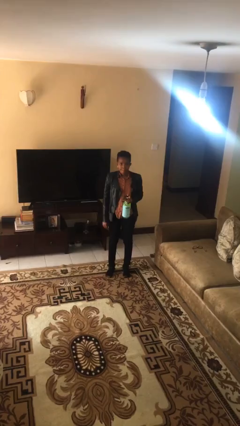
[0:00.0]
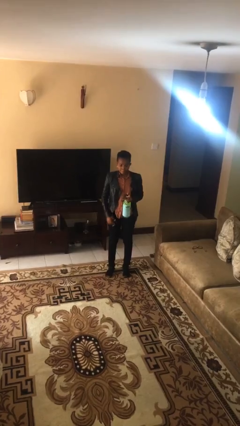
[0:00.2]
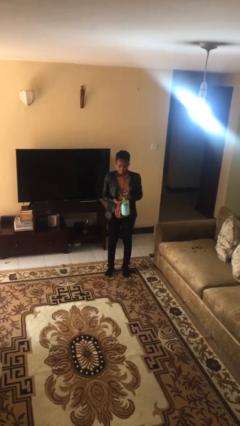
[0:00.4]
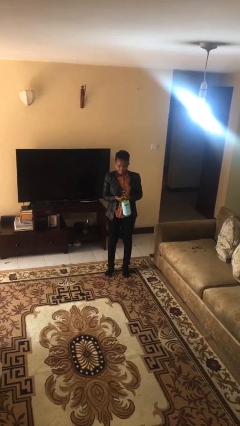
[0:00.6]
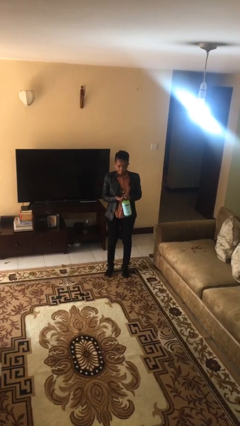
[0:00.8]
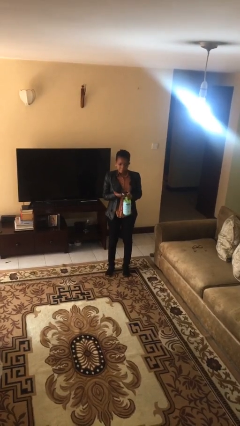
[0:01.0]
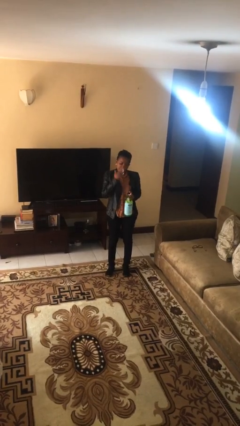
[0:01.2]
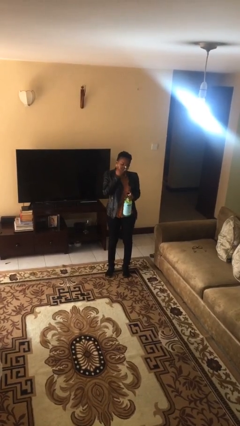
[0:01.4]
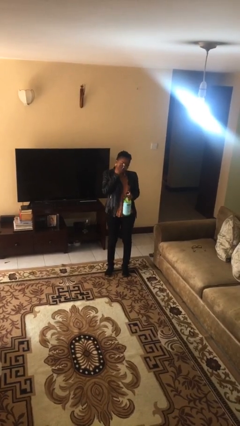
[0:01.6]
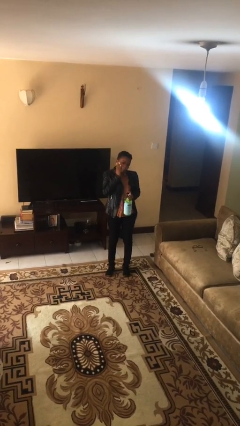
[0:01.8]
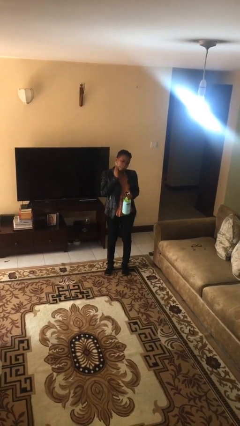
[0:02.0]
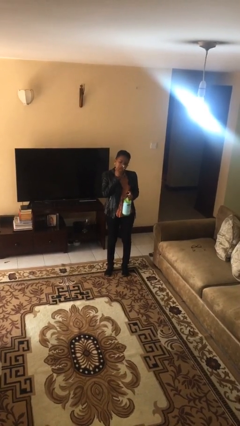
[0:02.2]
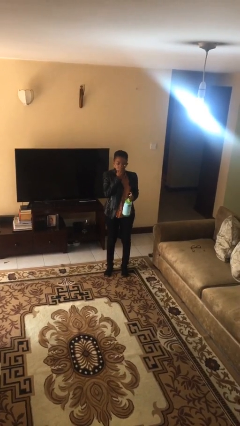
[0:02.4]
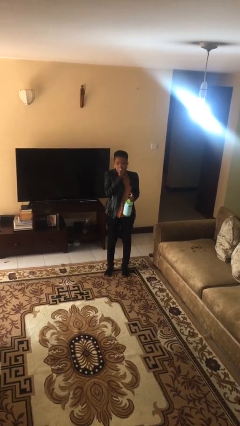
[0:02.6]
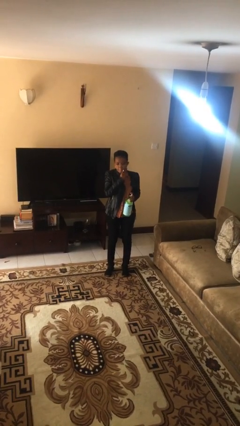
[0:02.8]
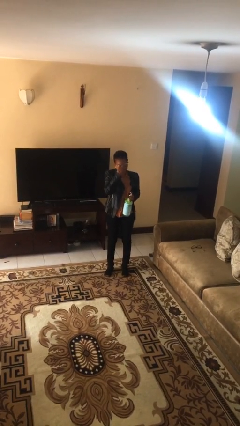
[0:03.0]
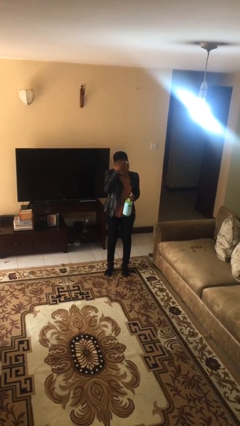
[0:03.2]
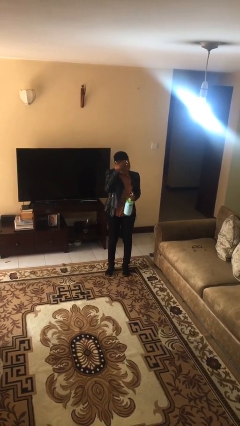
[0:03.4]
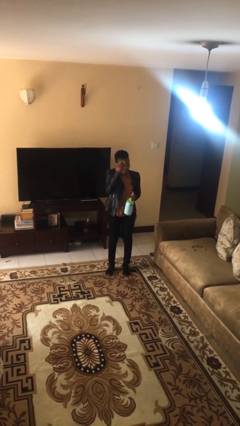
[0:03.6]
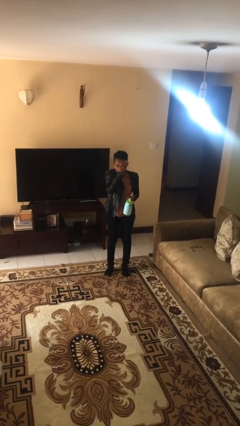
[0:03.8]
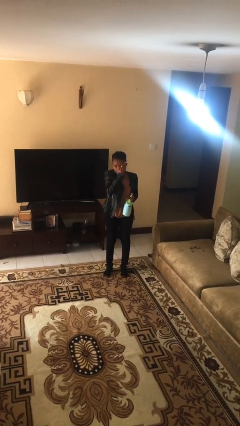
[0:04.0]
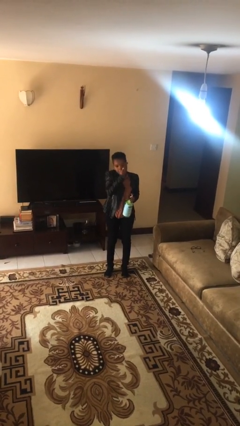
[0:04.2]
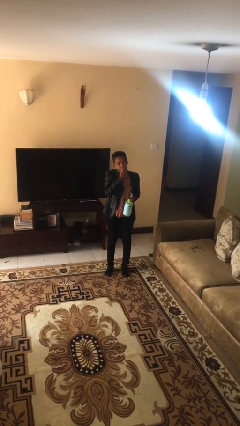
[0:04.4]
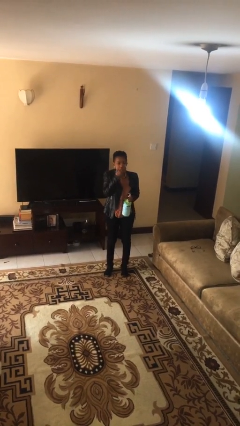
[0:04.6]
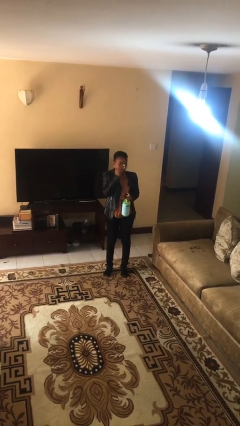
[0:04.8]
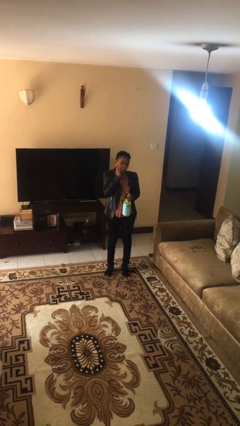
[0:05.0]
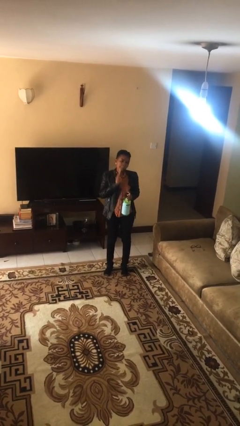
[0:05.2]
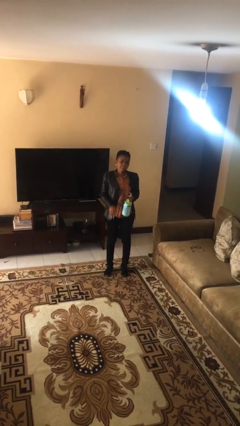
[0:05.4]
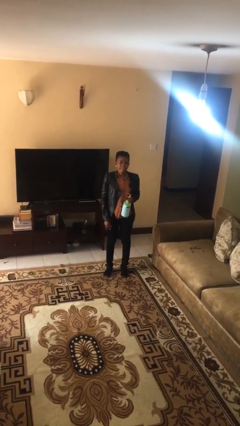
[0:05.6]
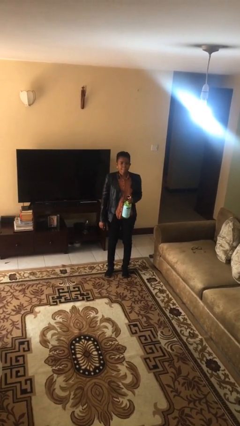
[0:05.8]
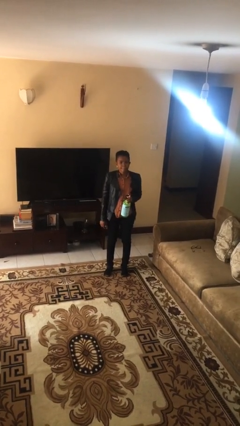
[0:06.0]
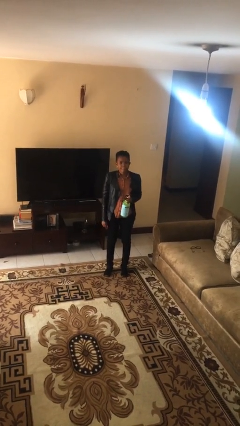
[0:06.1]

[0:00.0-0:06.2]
person applies facial moisturizer

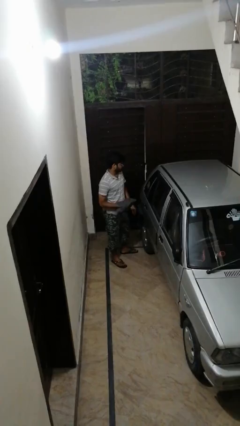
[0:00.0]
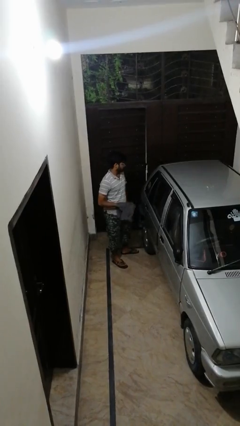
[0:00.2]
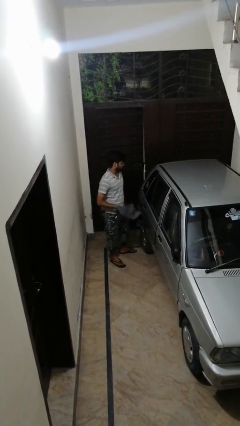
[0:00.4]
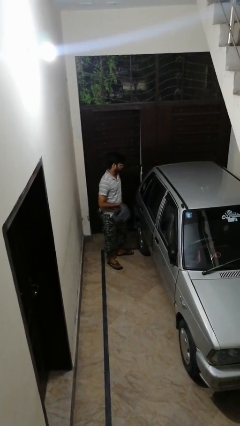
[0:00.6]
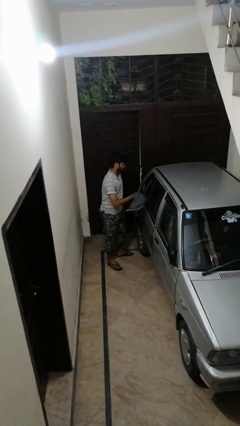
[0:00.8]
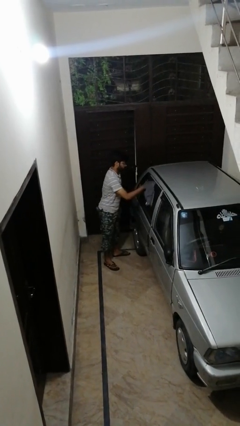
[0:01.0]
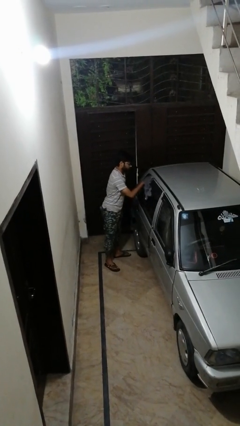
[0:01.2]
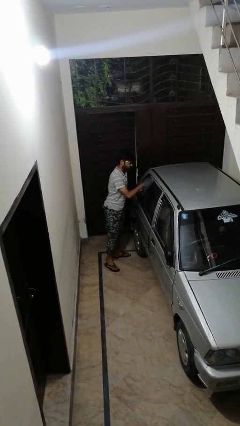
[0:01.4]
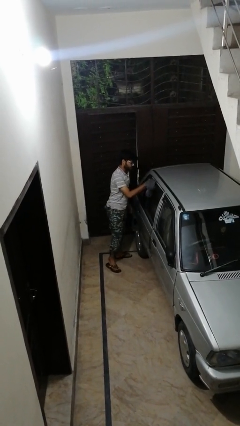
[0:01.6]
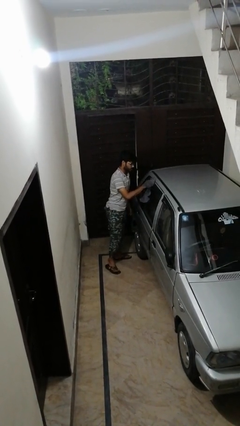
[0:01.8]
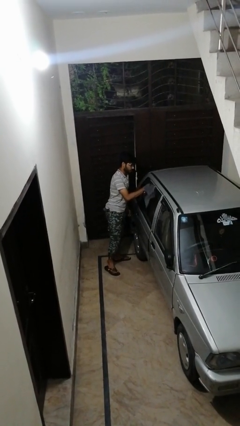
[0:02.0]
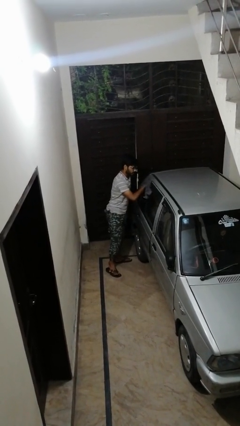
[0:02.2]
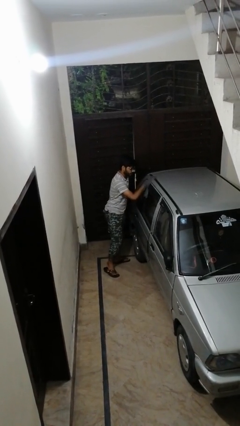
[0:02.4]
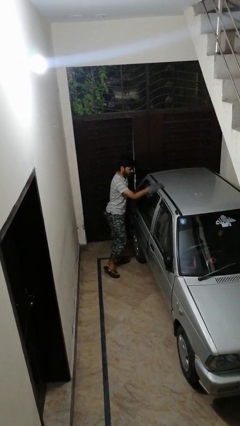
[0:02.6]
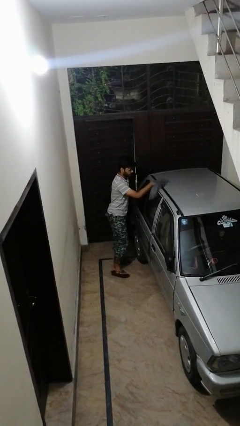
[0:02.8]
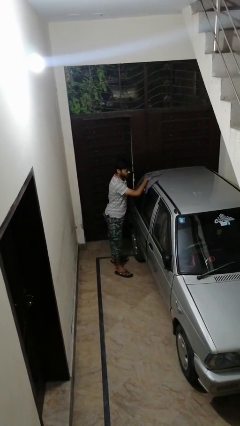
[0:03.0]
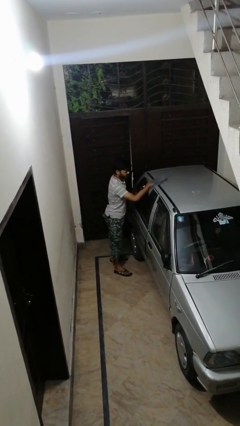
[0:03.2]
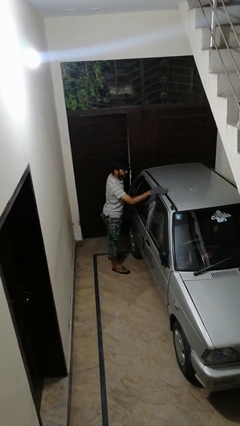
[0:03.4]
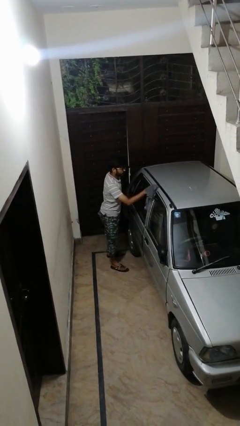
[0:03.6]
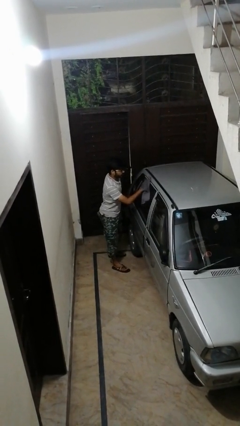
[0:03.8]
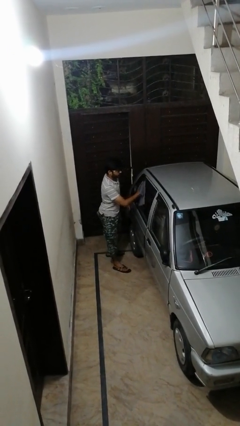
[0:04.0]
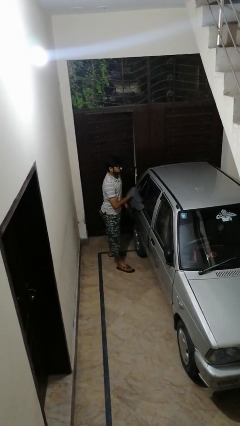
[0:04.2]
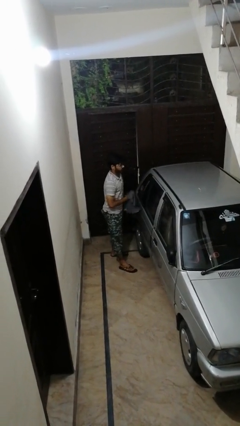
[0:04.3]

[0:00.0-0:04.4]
person polishes car with rag

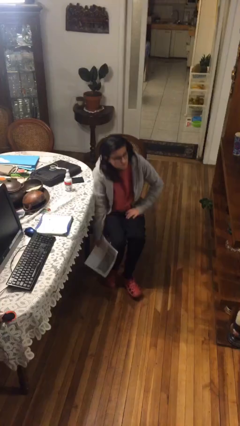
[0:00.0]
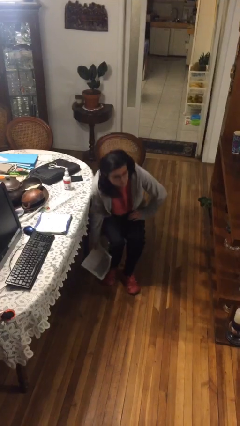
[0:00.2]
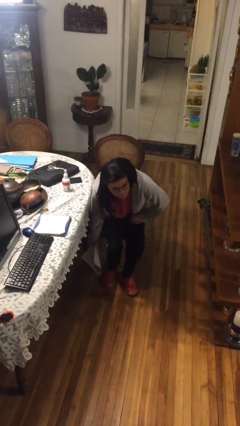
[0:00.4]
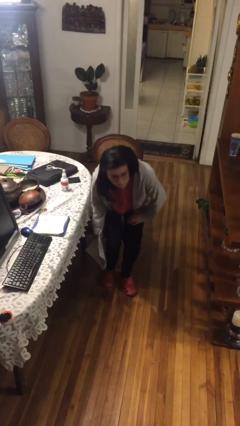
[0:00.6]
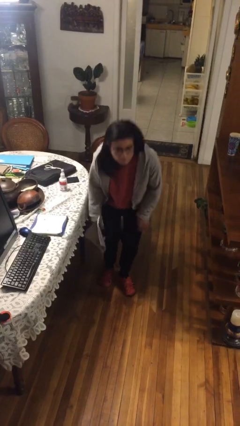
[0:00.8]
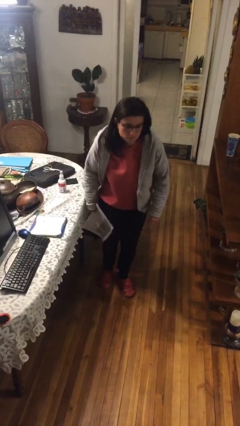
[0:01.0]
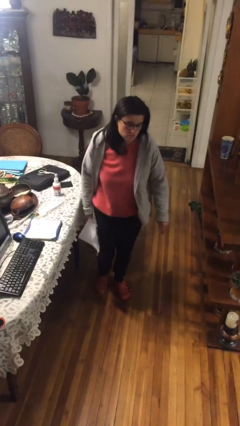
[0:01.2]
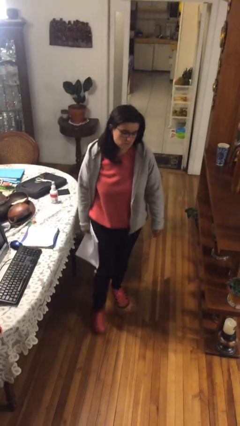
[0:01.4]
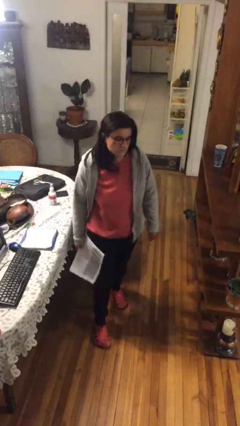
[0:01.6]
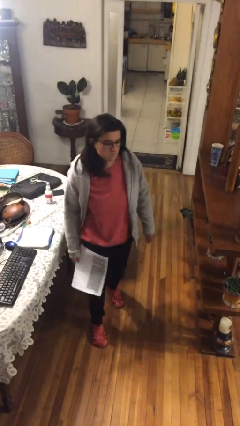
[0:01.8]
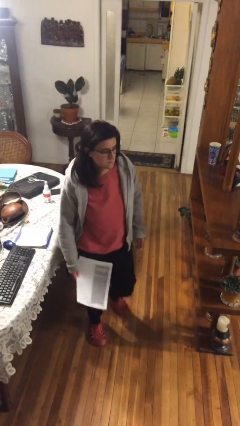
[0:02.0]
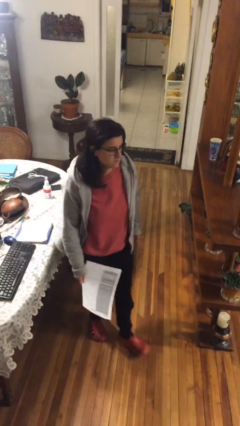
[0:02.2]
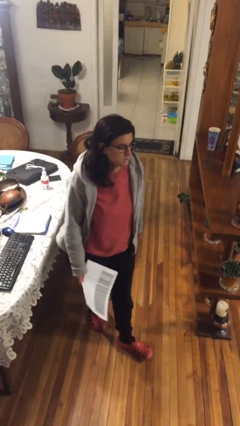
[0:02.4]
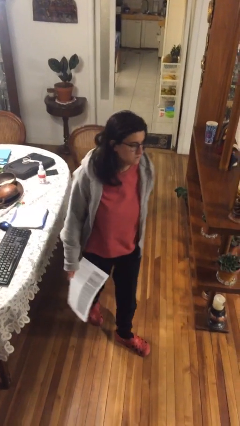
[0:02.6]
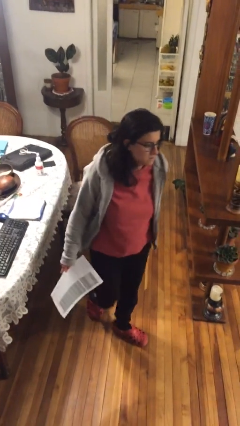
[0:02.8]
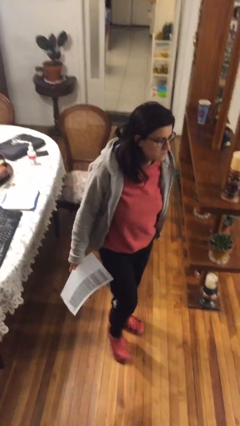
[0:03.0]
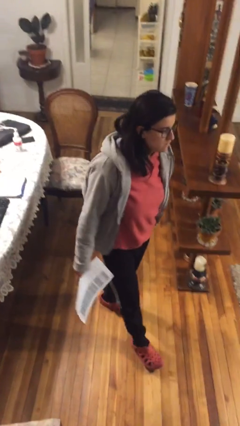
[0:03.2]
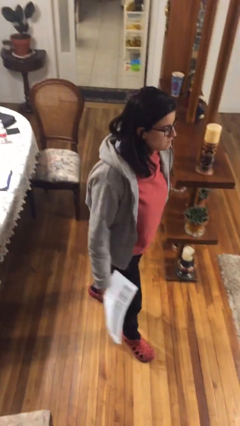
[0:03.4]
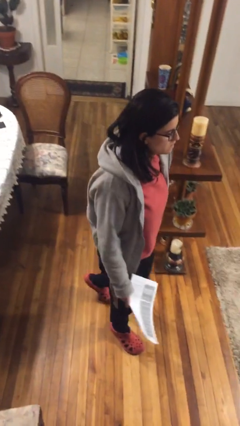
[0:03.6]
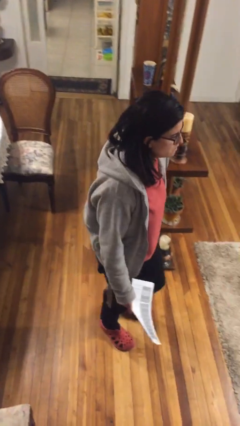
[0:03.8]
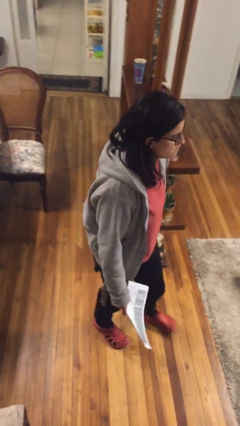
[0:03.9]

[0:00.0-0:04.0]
person stands up

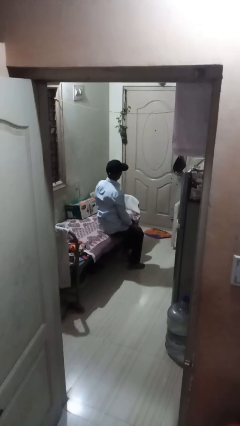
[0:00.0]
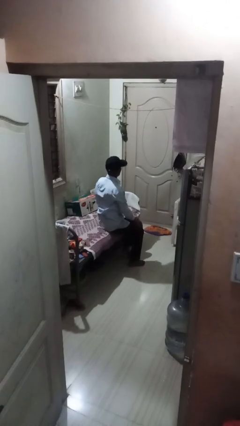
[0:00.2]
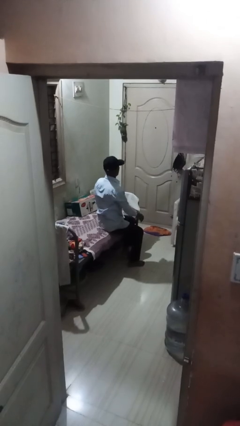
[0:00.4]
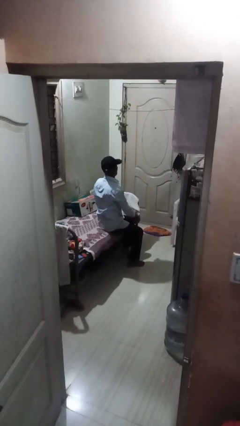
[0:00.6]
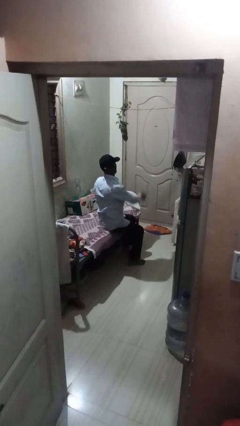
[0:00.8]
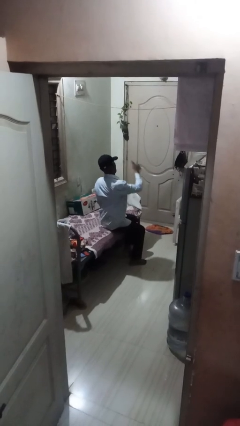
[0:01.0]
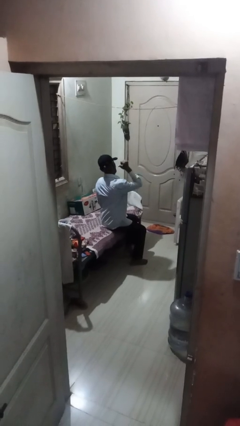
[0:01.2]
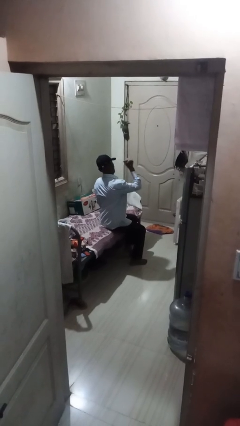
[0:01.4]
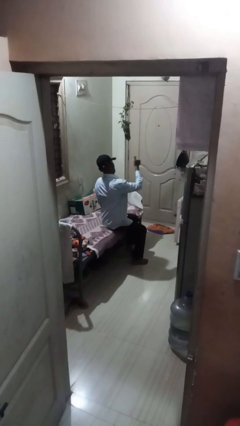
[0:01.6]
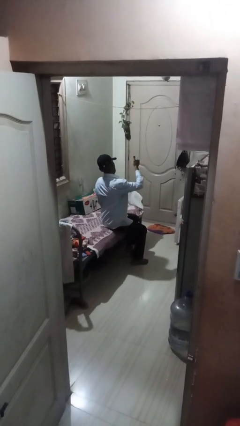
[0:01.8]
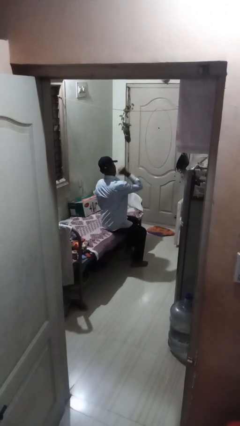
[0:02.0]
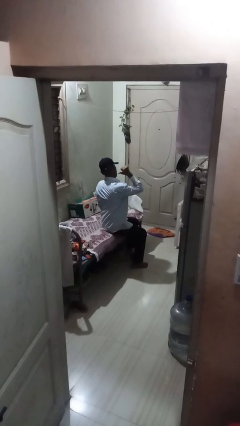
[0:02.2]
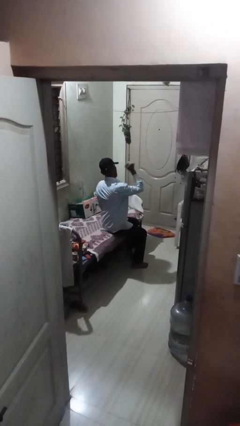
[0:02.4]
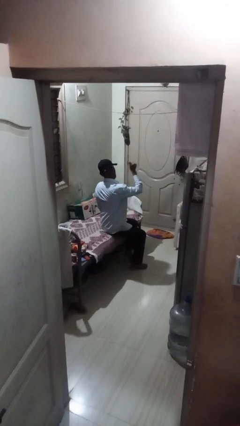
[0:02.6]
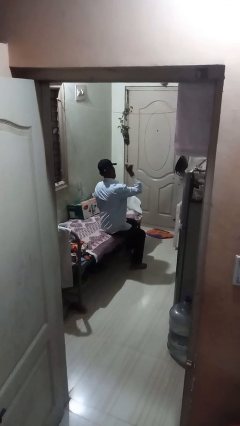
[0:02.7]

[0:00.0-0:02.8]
person gestures behind me

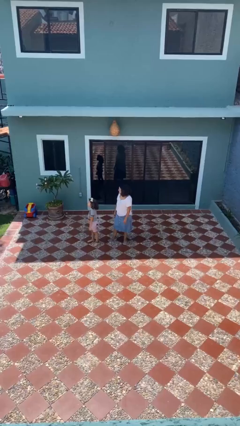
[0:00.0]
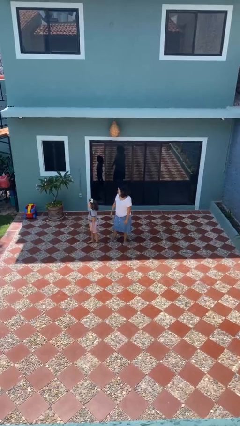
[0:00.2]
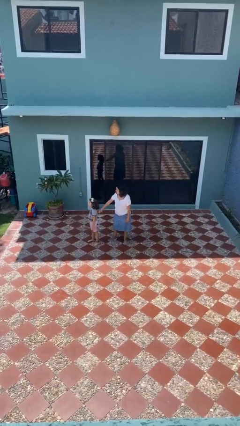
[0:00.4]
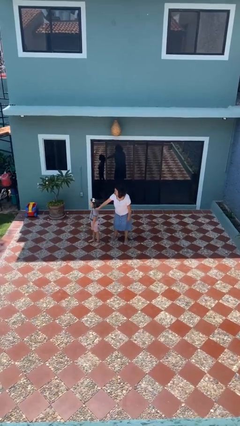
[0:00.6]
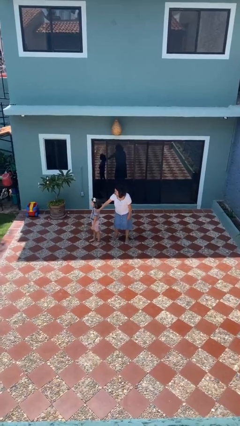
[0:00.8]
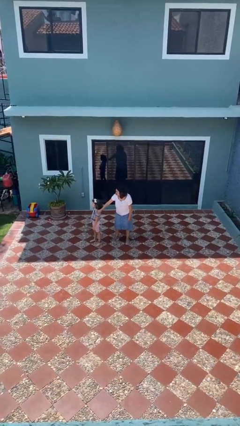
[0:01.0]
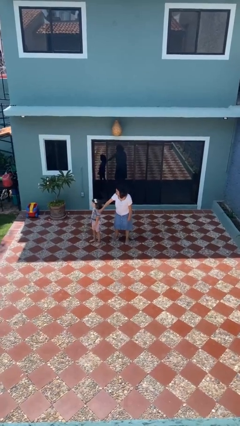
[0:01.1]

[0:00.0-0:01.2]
person grabs person by shoulder
